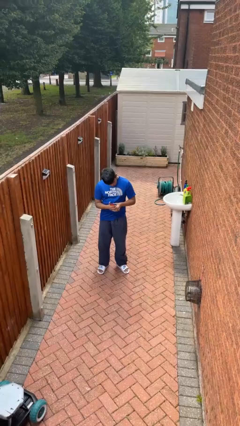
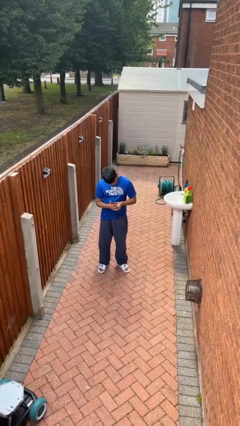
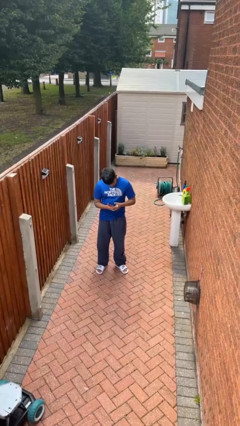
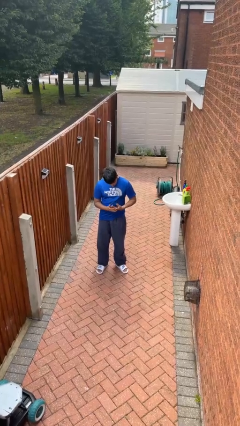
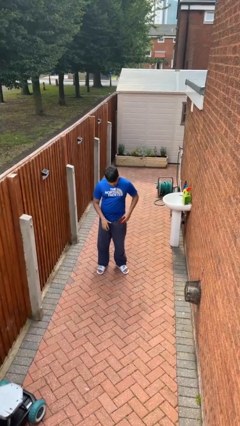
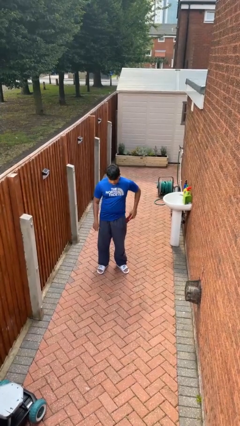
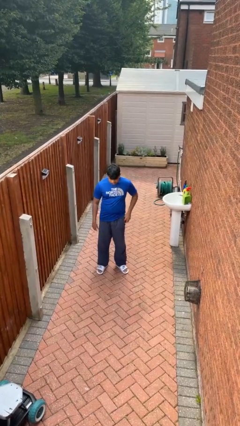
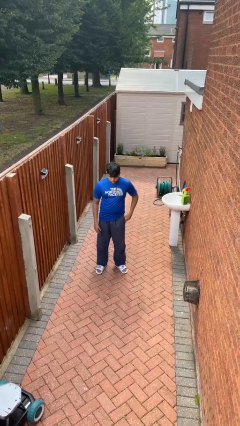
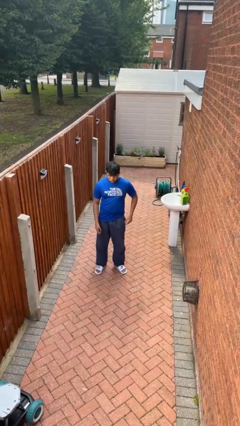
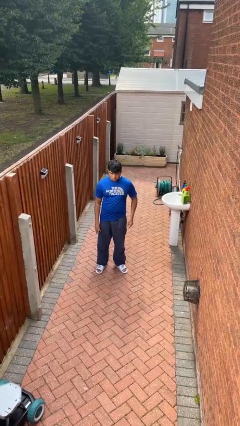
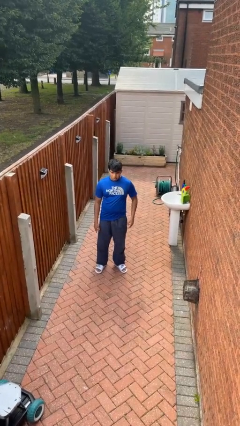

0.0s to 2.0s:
person puts phone into pocket

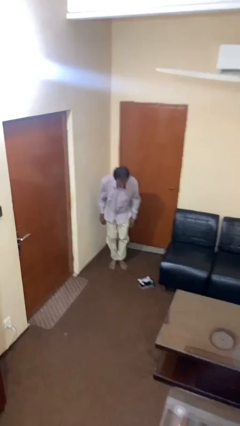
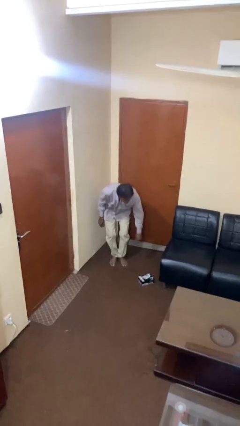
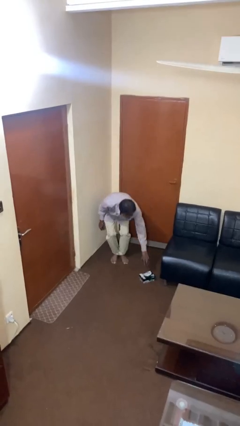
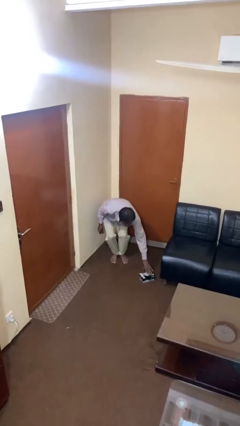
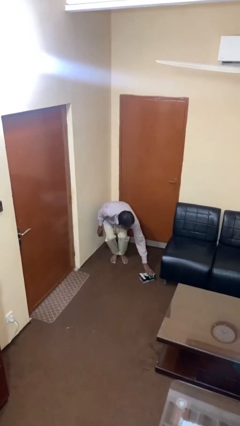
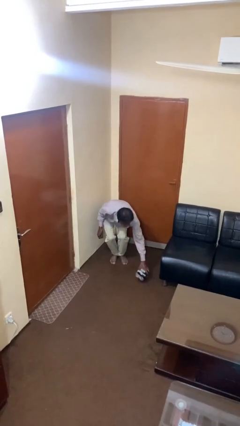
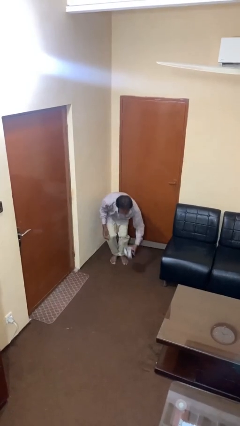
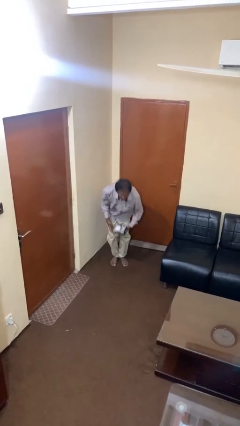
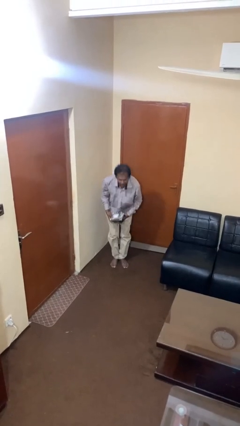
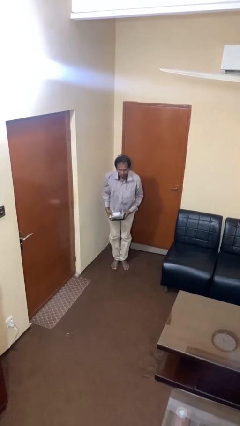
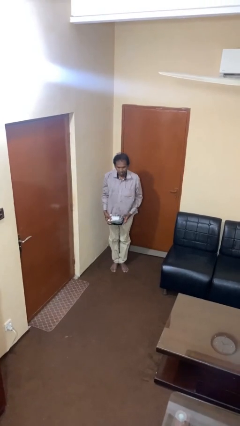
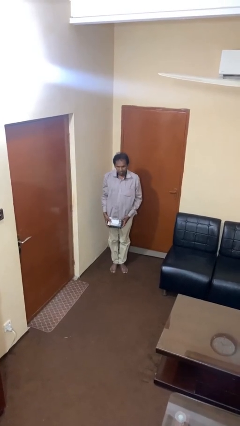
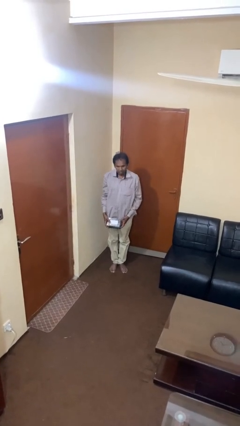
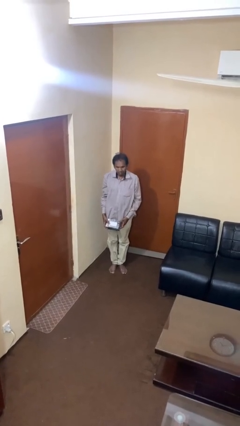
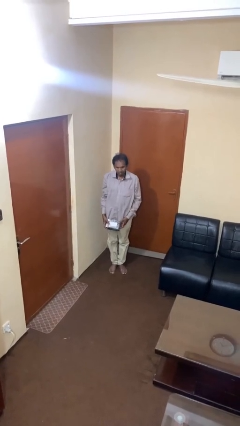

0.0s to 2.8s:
person picks up object from floor

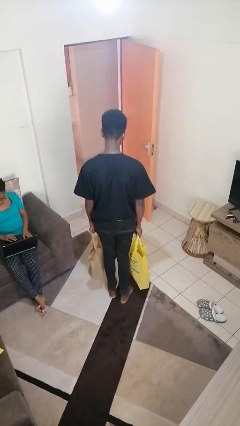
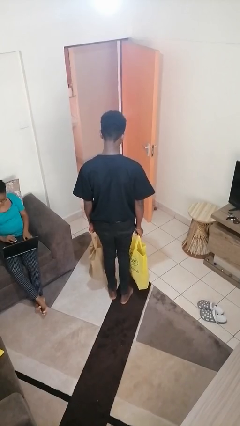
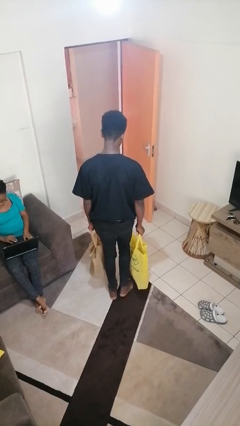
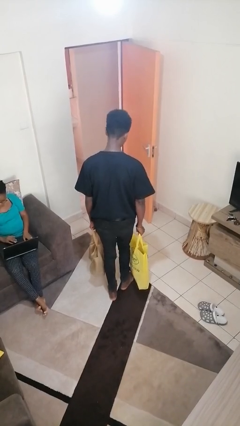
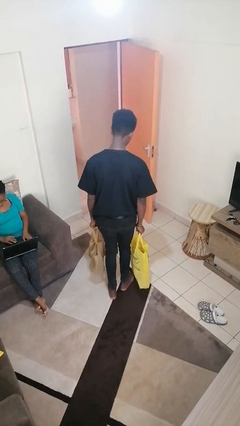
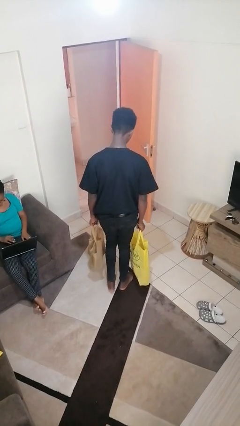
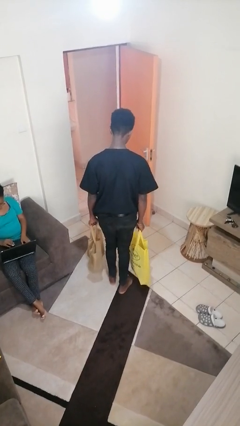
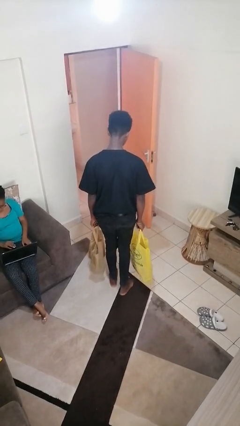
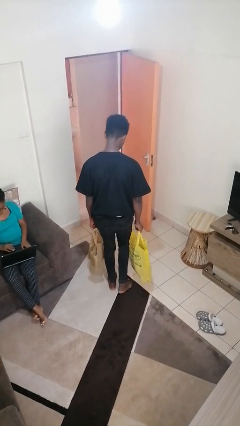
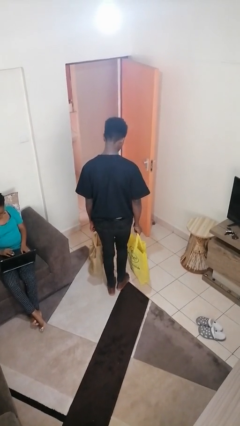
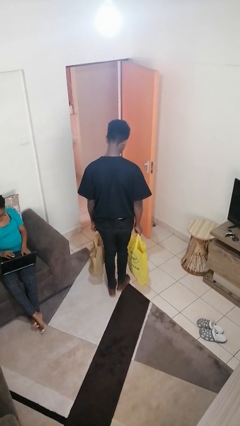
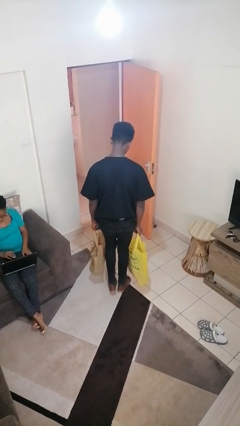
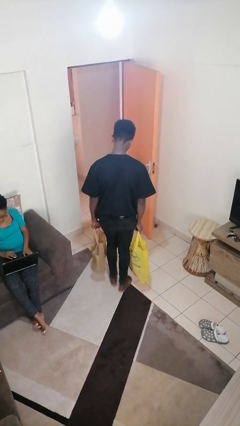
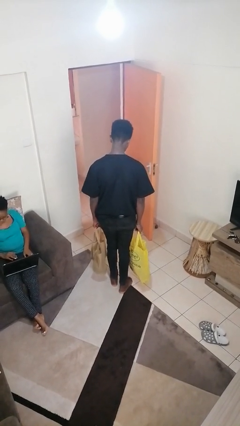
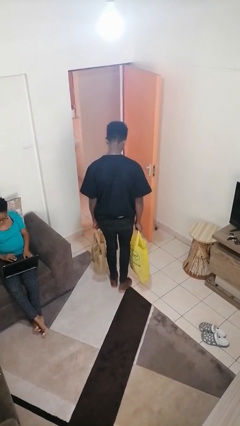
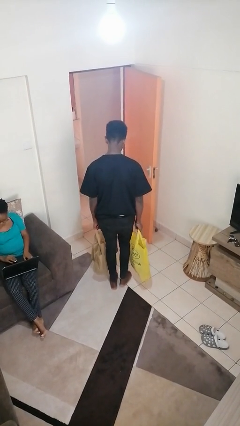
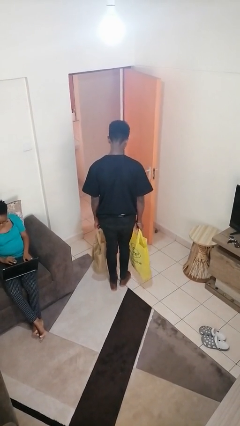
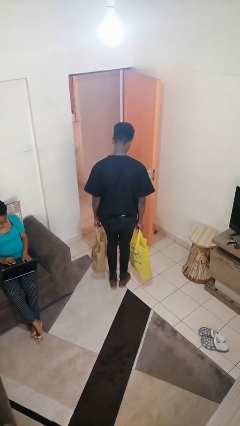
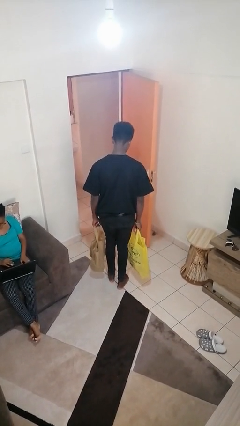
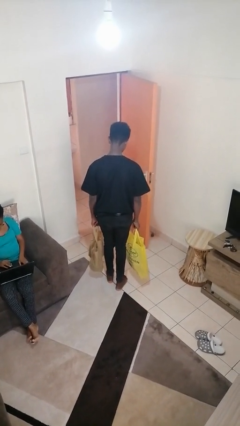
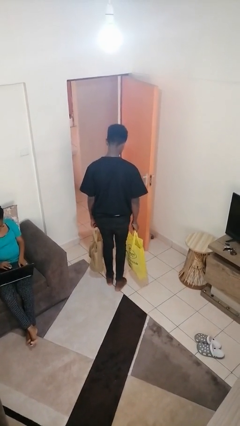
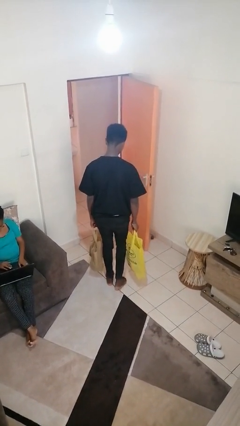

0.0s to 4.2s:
person carries groceries

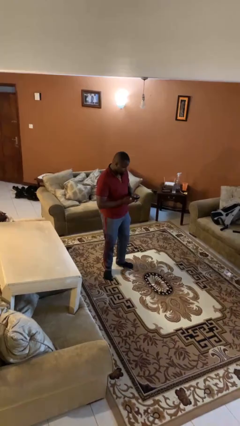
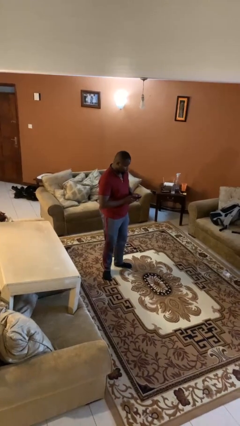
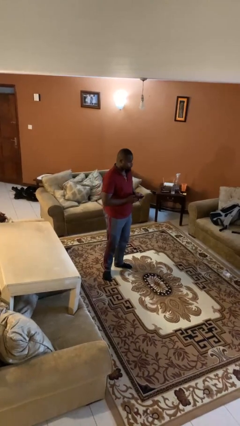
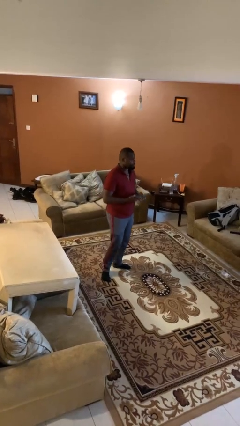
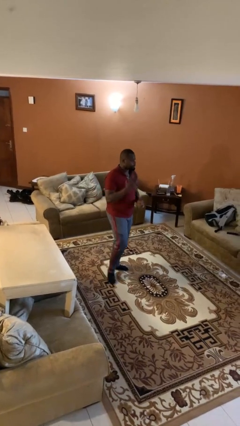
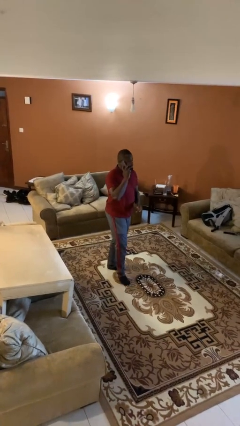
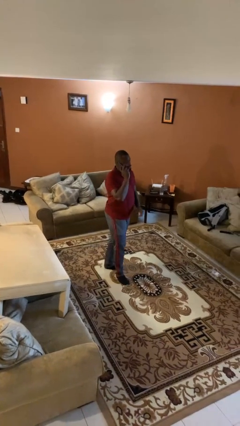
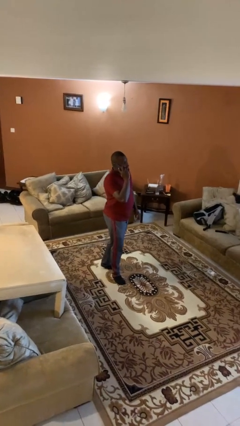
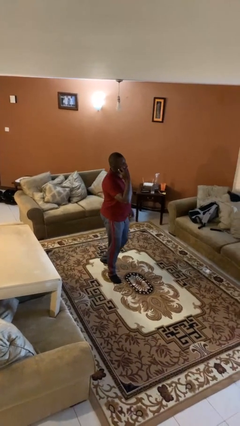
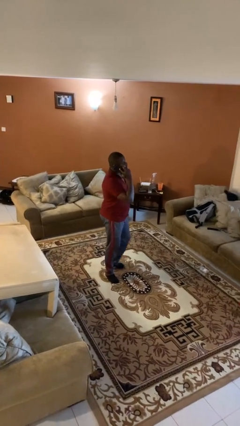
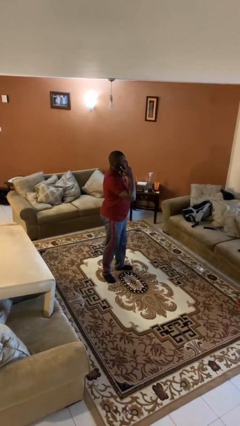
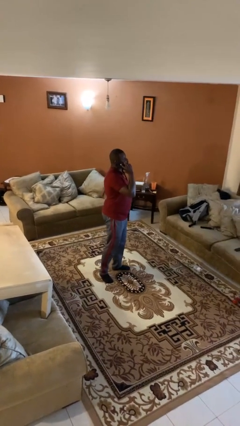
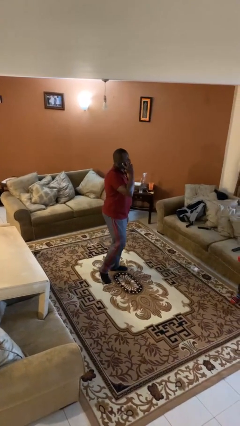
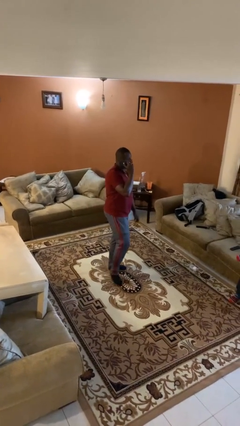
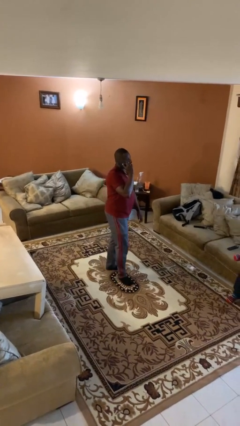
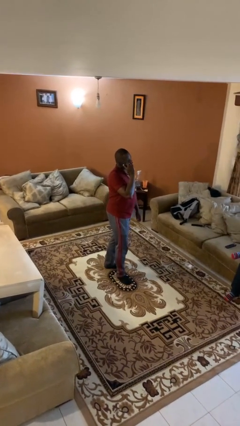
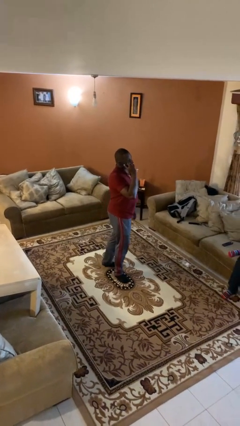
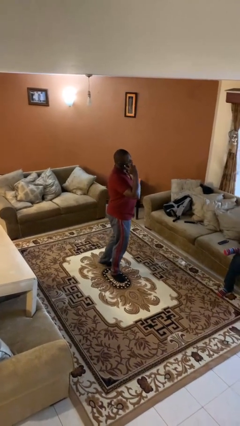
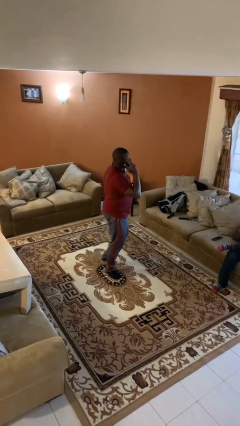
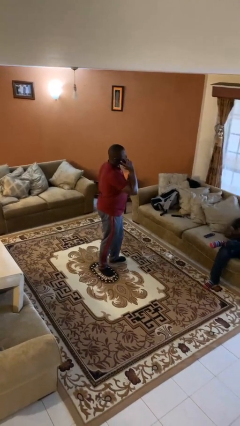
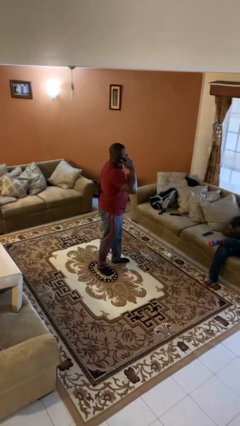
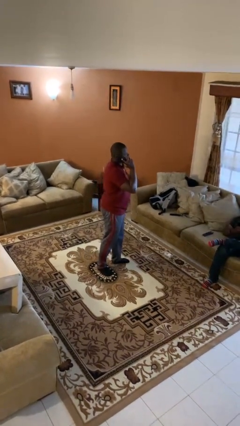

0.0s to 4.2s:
person talks on phone

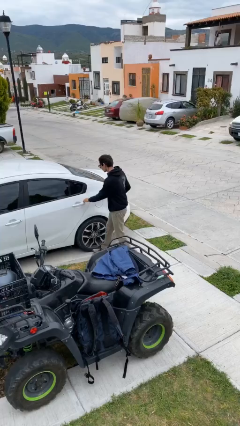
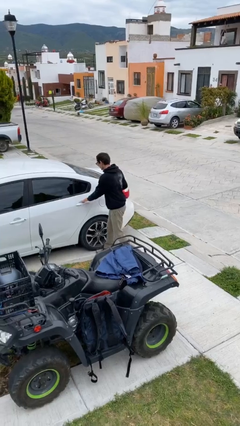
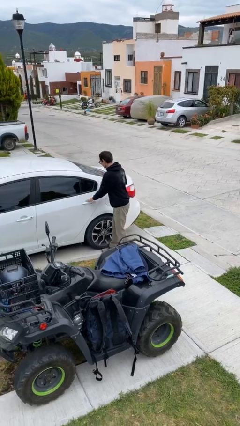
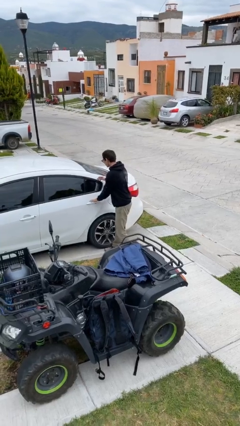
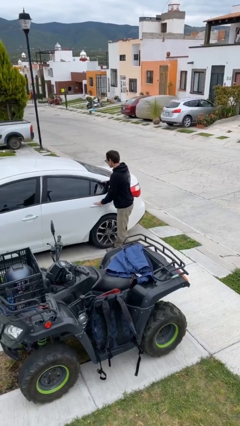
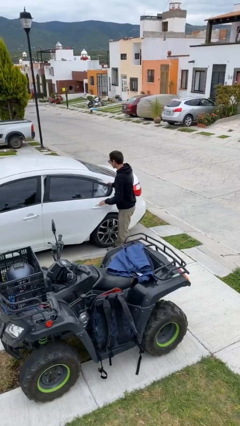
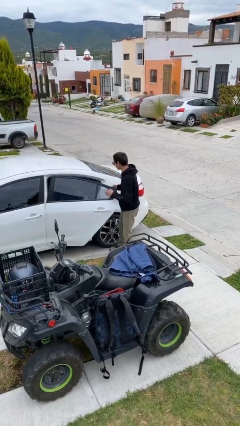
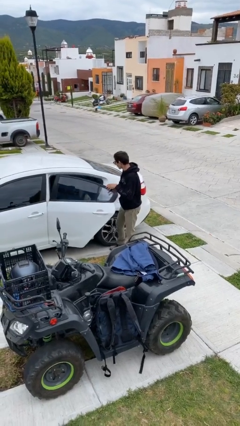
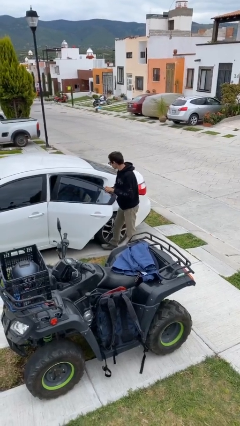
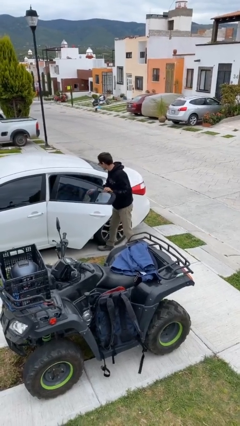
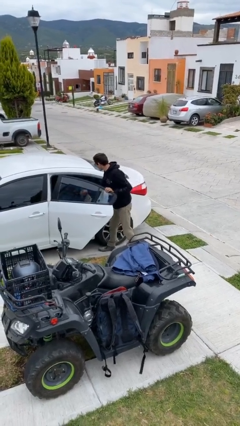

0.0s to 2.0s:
person opens car door

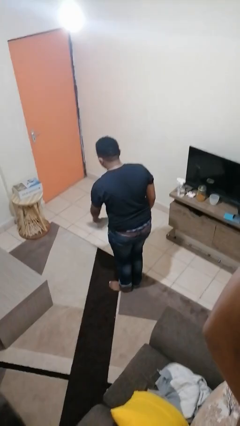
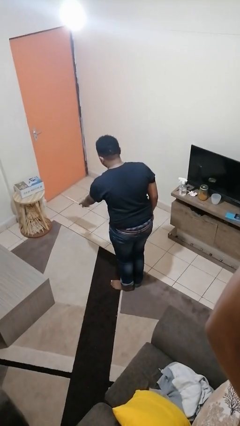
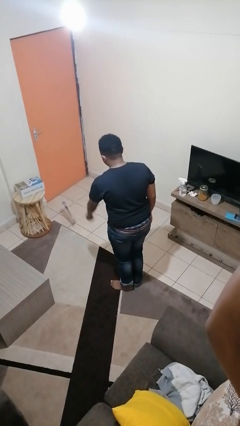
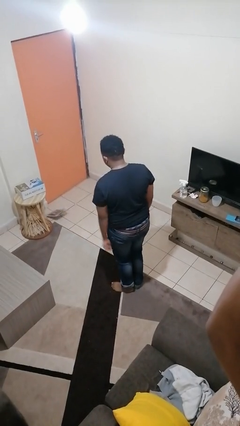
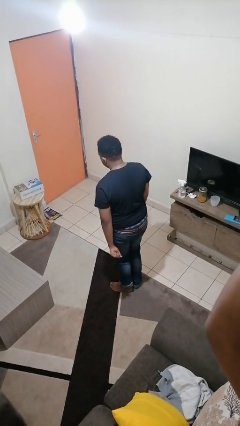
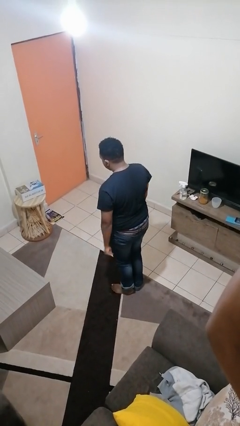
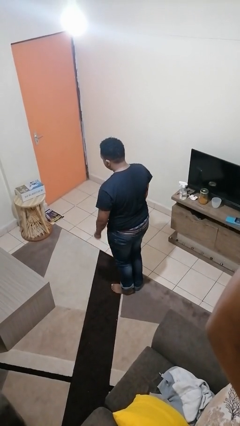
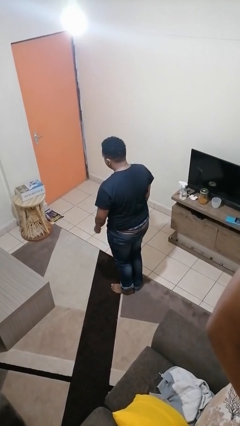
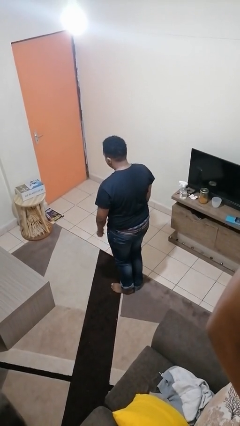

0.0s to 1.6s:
person throws object to ground

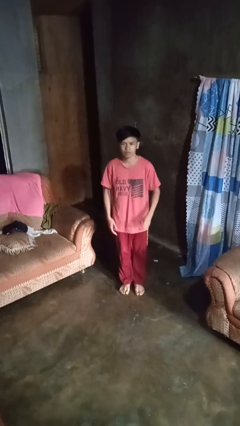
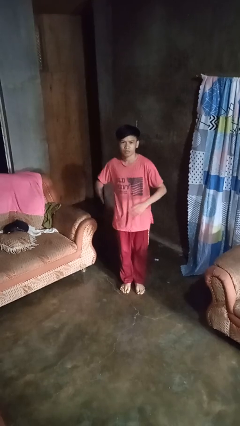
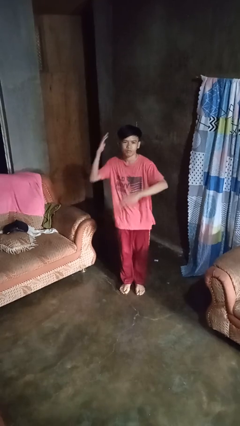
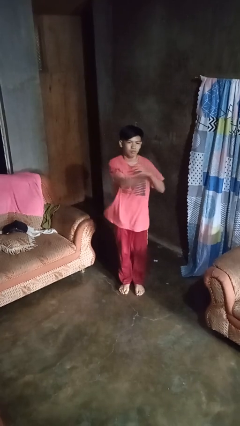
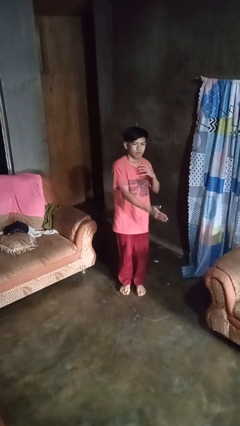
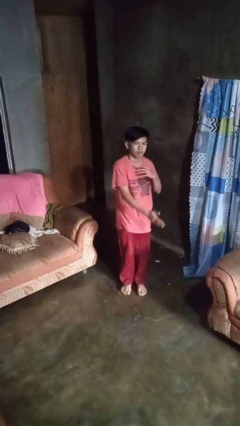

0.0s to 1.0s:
person karate chop
